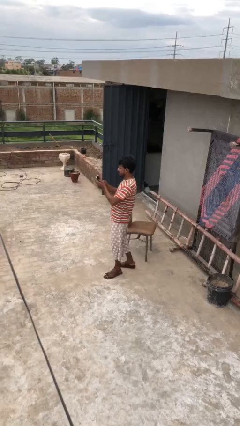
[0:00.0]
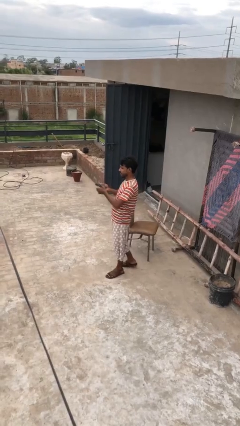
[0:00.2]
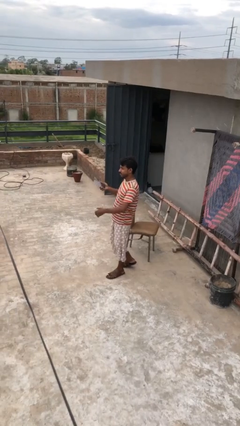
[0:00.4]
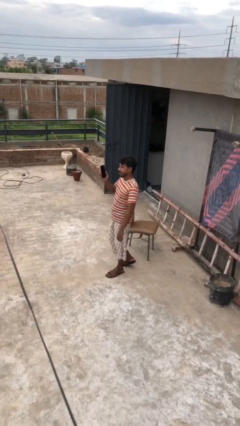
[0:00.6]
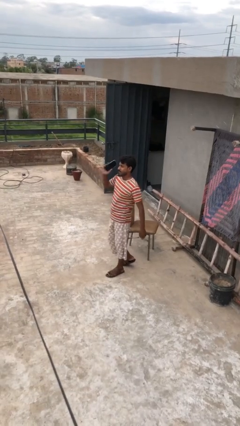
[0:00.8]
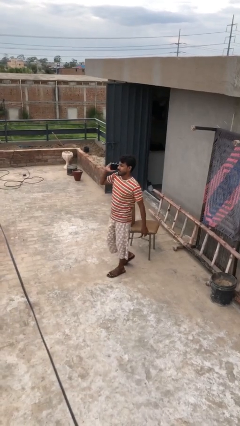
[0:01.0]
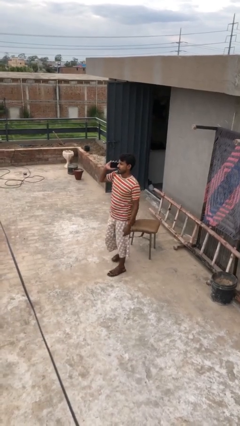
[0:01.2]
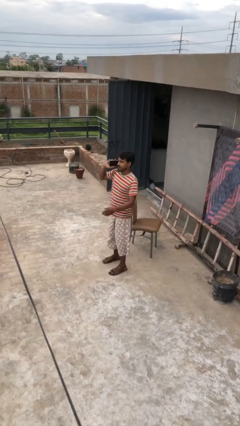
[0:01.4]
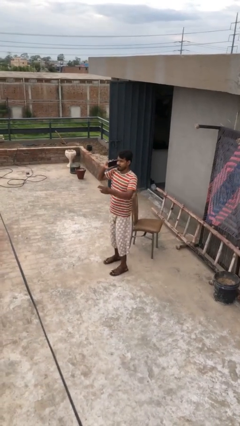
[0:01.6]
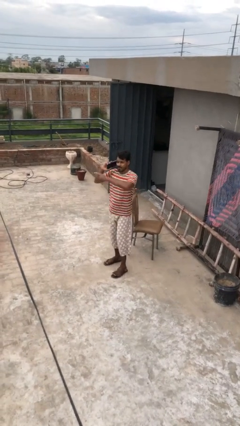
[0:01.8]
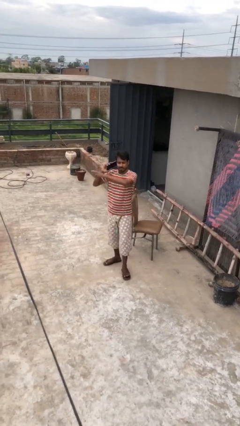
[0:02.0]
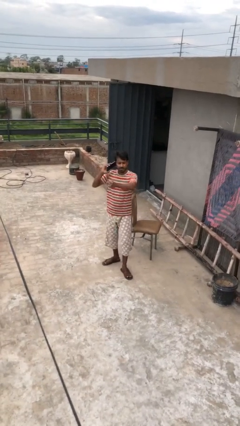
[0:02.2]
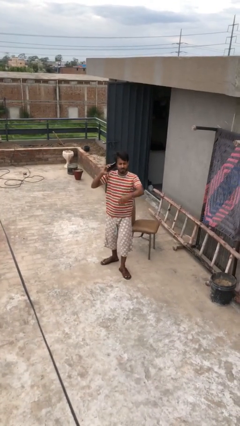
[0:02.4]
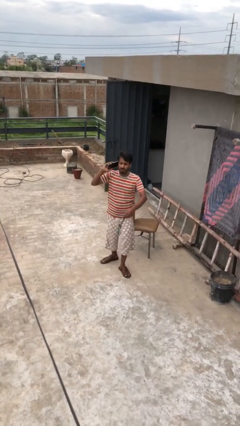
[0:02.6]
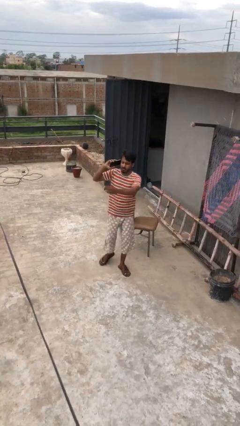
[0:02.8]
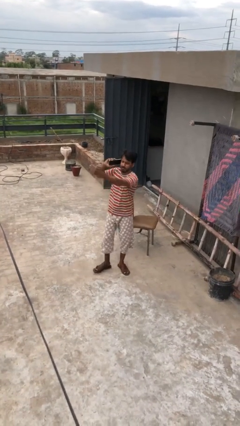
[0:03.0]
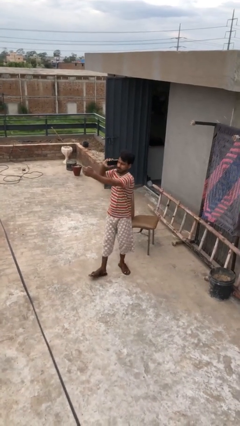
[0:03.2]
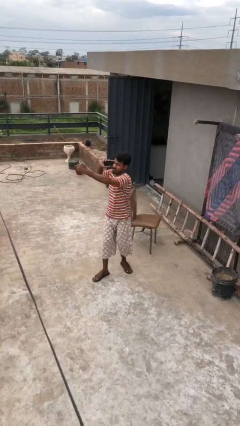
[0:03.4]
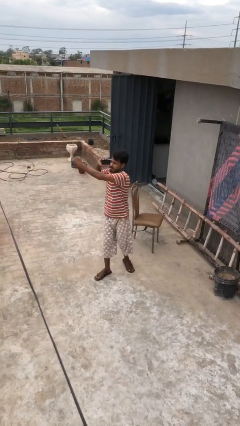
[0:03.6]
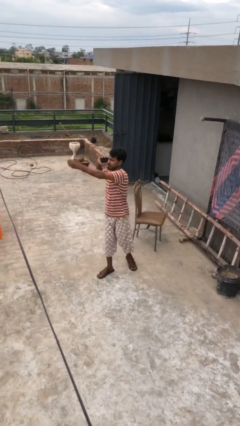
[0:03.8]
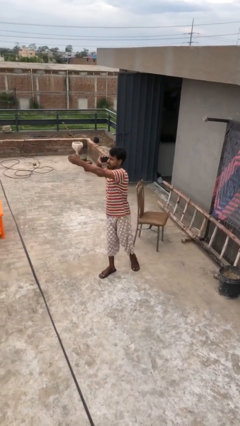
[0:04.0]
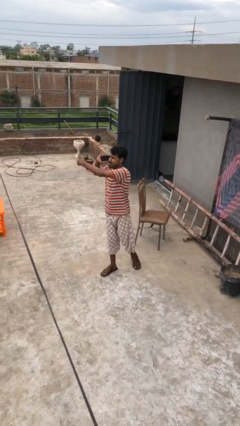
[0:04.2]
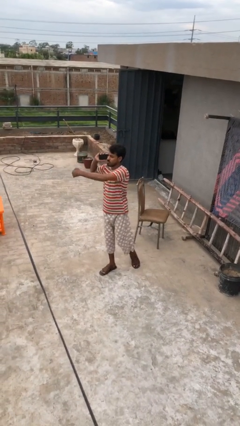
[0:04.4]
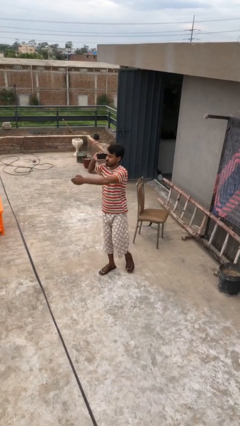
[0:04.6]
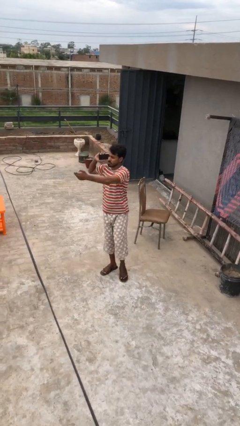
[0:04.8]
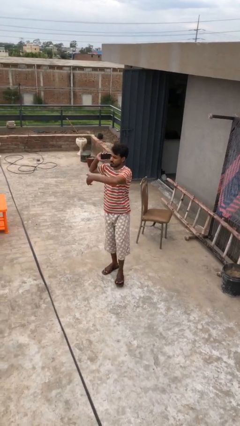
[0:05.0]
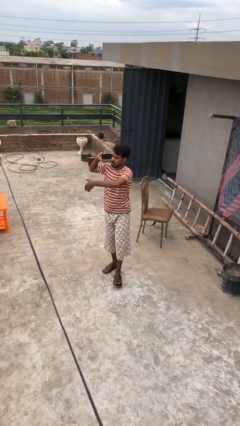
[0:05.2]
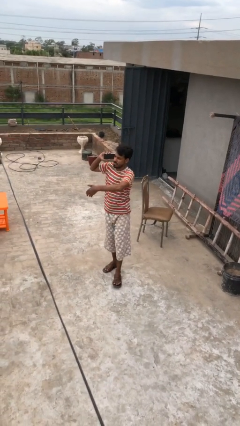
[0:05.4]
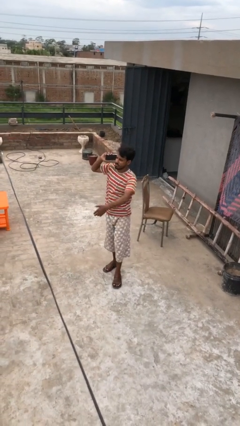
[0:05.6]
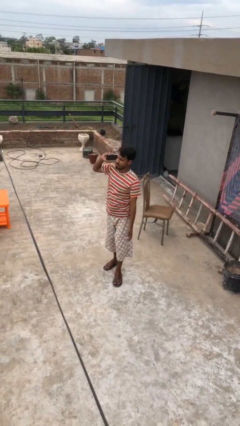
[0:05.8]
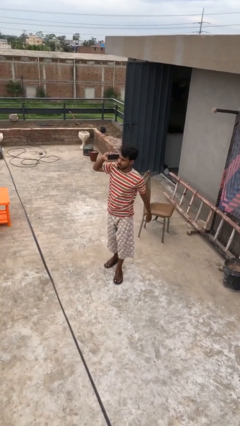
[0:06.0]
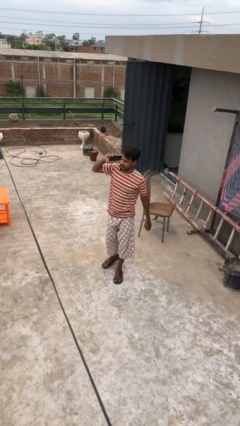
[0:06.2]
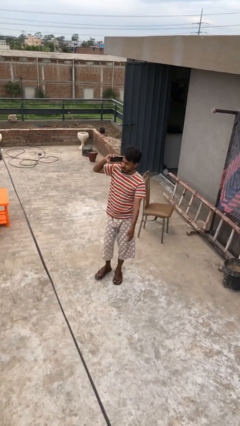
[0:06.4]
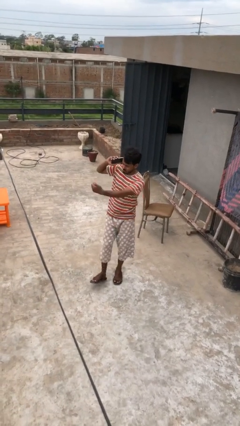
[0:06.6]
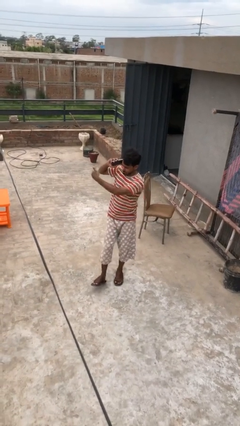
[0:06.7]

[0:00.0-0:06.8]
person talks on phone

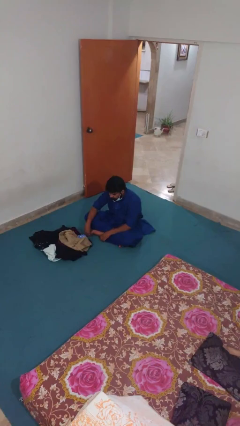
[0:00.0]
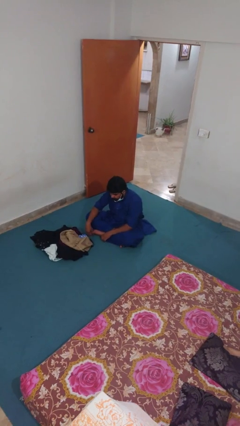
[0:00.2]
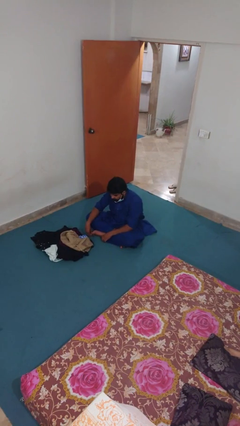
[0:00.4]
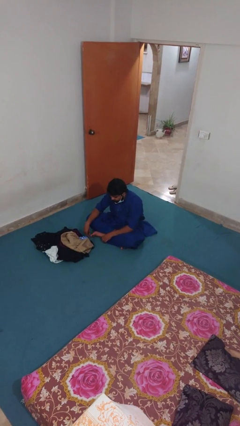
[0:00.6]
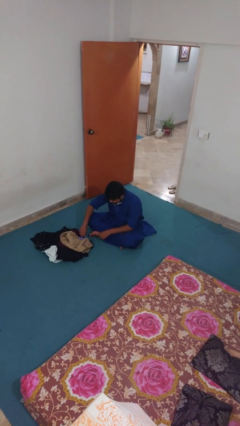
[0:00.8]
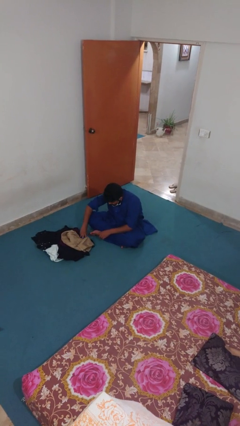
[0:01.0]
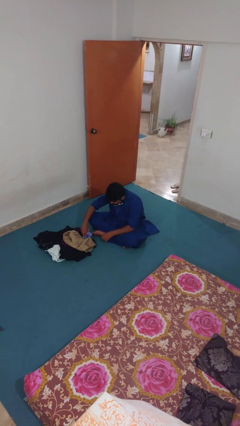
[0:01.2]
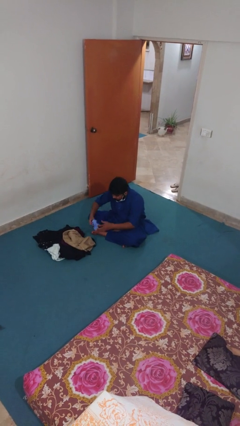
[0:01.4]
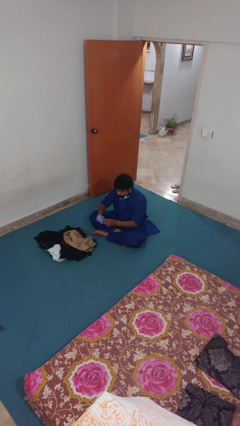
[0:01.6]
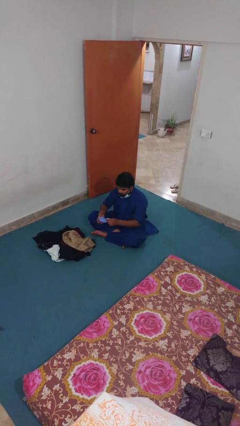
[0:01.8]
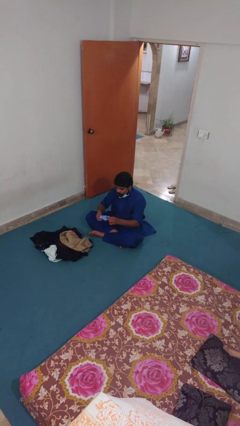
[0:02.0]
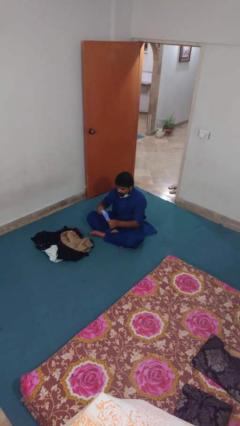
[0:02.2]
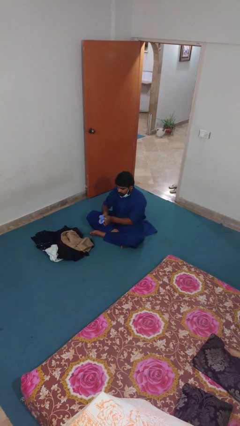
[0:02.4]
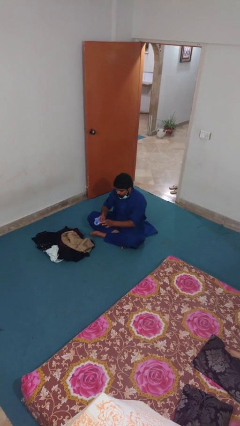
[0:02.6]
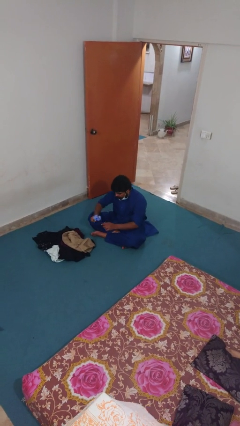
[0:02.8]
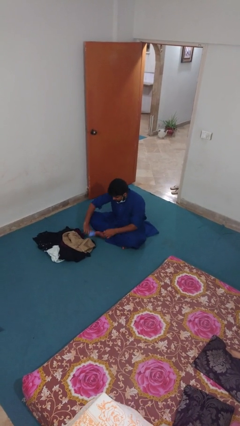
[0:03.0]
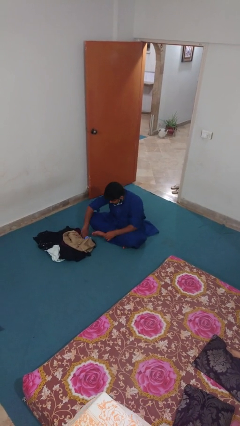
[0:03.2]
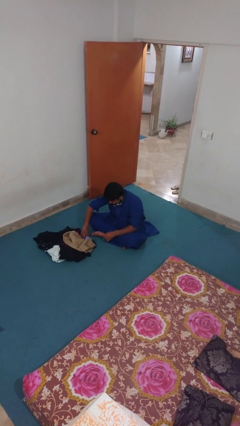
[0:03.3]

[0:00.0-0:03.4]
person folds socks

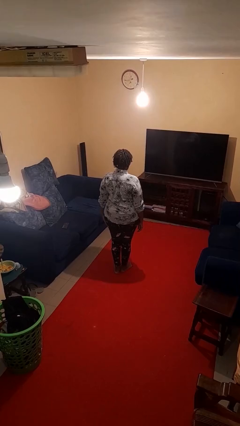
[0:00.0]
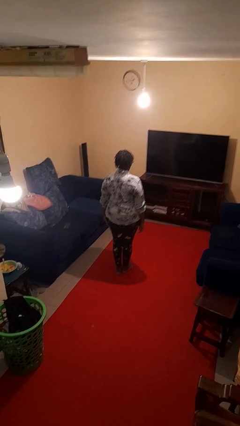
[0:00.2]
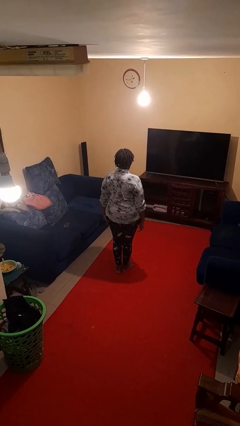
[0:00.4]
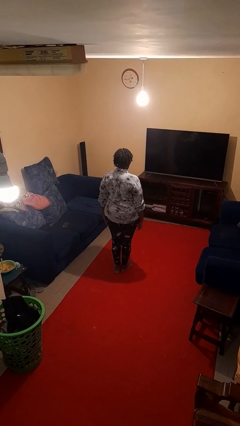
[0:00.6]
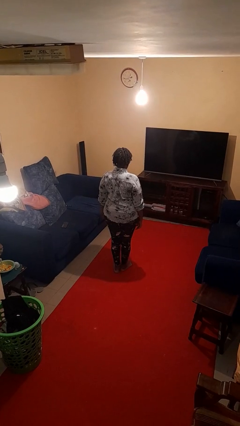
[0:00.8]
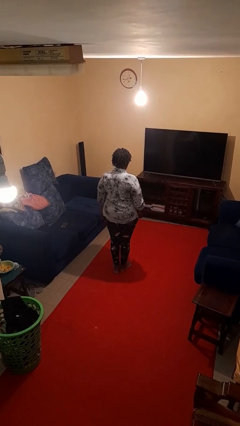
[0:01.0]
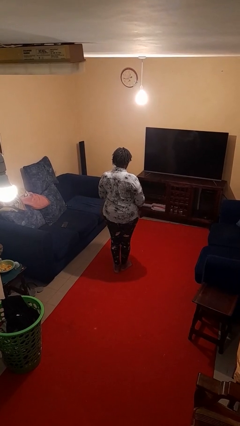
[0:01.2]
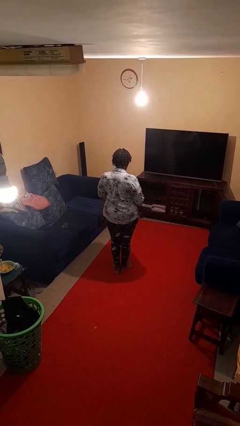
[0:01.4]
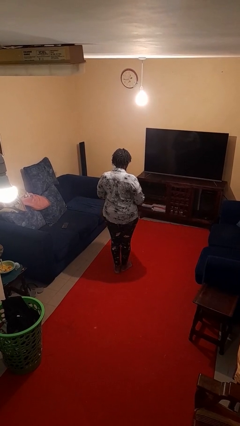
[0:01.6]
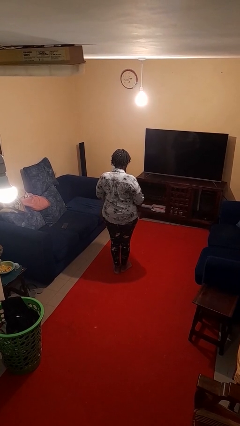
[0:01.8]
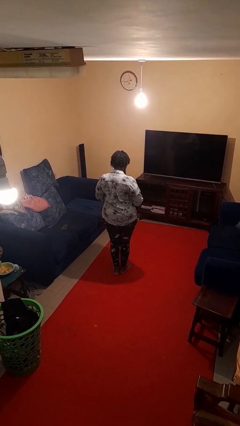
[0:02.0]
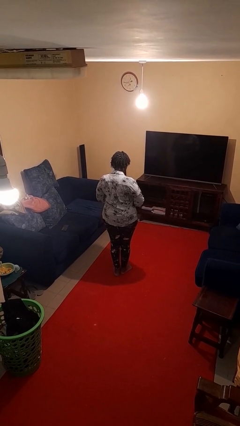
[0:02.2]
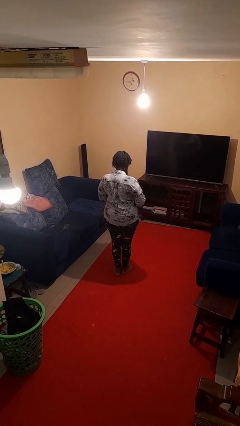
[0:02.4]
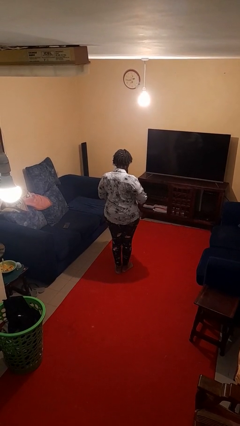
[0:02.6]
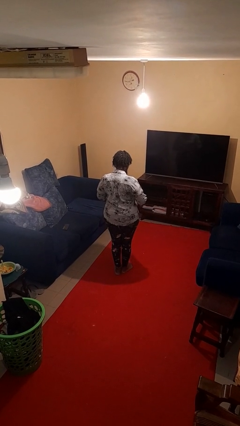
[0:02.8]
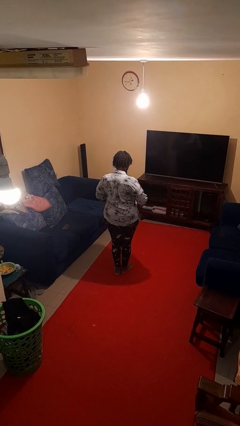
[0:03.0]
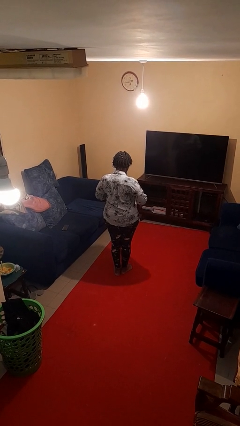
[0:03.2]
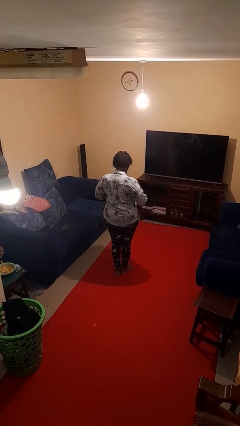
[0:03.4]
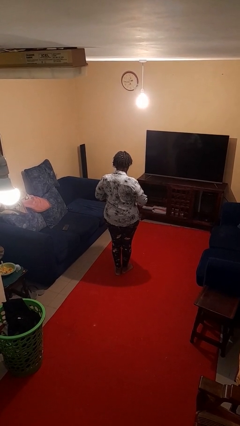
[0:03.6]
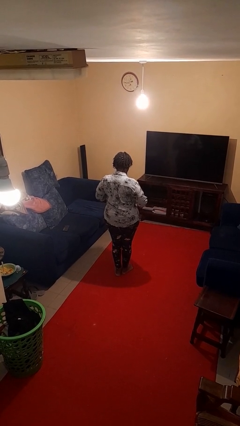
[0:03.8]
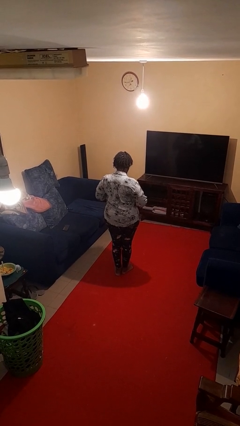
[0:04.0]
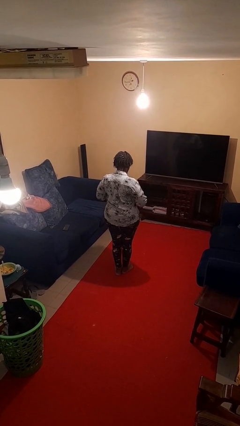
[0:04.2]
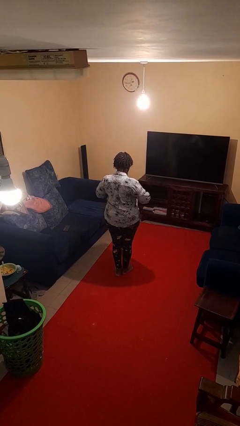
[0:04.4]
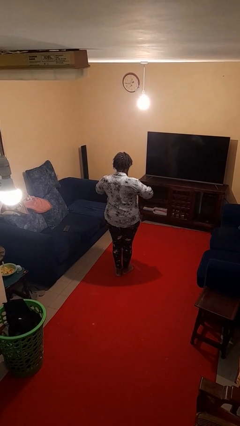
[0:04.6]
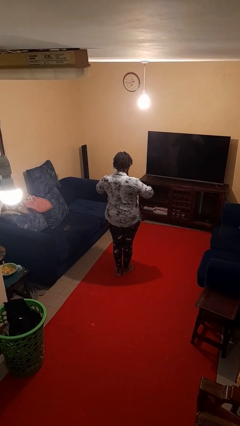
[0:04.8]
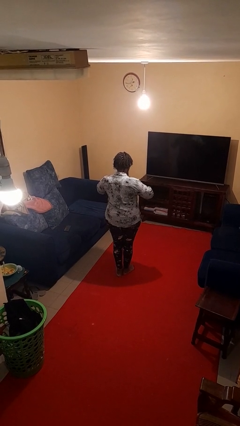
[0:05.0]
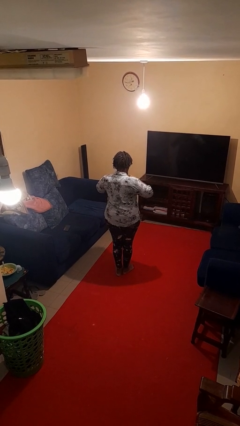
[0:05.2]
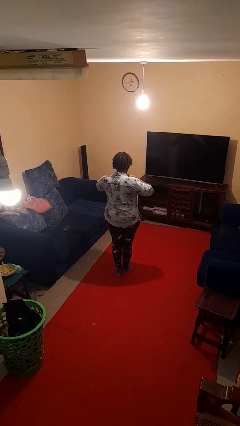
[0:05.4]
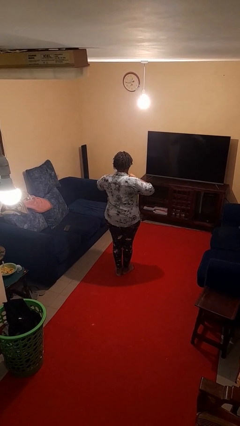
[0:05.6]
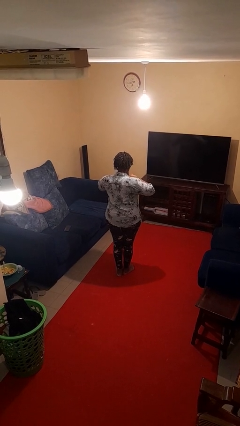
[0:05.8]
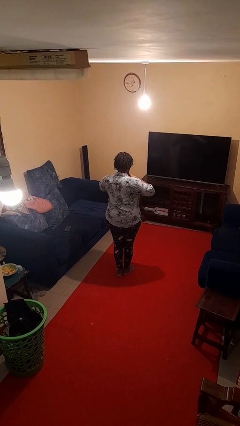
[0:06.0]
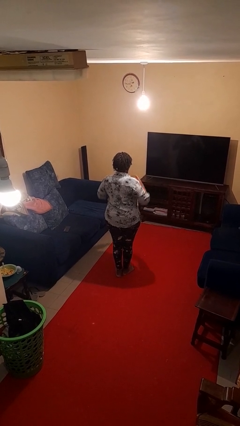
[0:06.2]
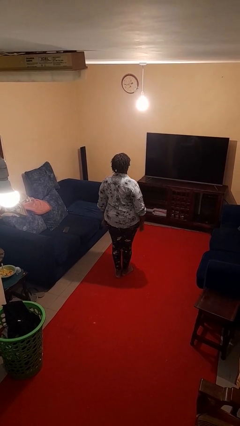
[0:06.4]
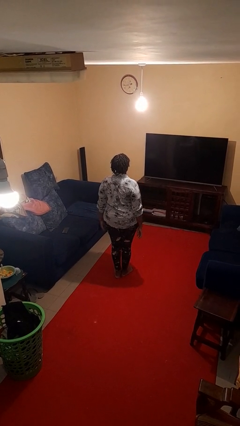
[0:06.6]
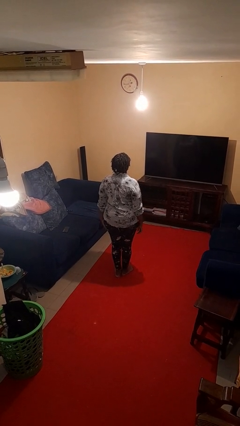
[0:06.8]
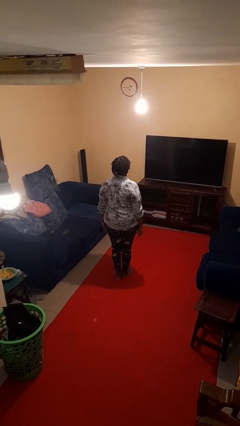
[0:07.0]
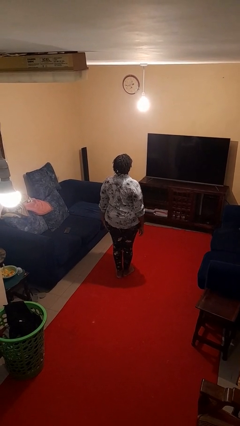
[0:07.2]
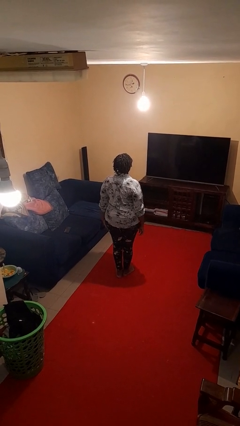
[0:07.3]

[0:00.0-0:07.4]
person unbuttons shirt

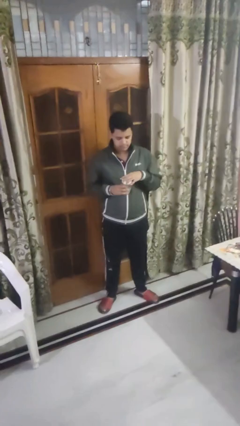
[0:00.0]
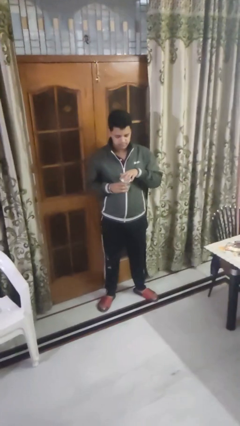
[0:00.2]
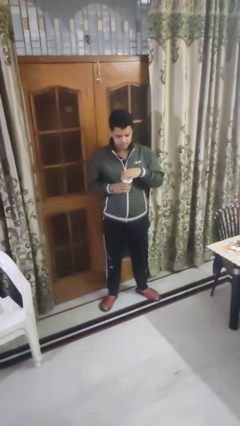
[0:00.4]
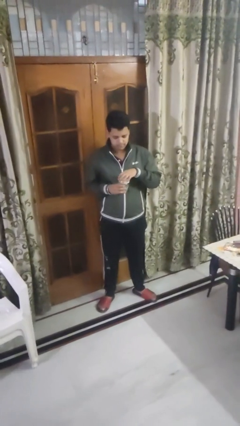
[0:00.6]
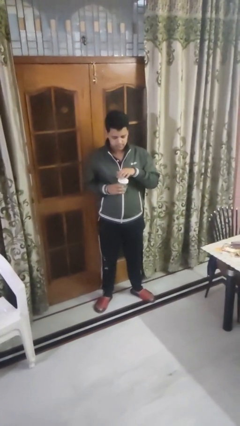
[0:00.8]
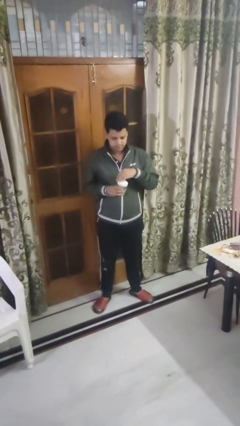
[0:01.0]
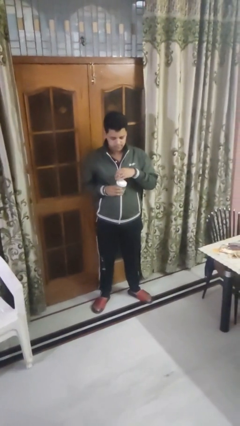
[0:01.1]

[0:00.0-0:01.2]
person closes jar
